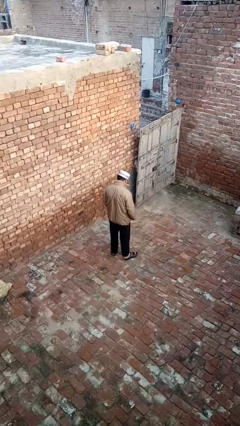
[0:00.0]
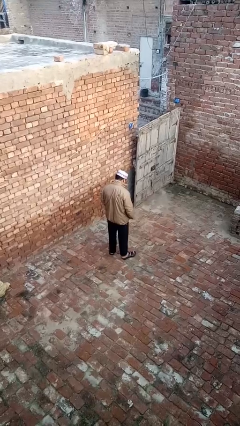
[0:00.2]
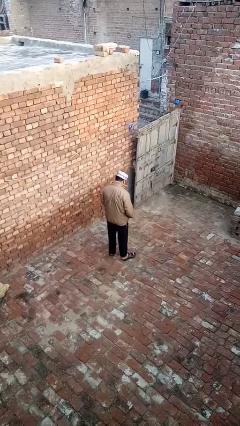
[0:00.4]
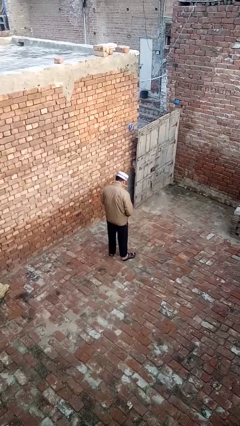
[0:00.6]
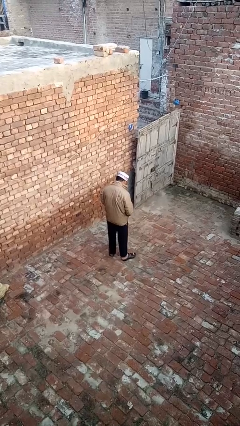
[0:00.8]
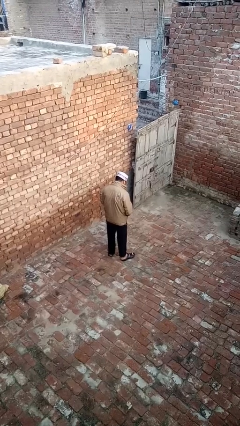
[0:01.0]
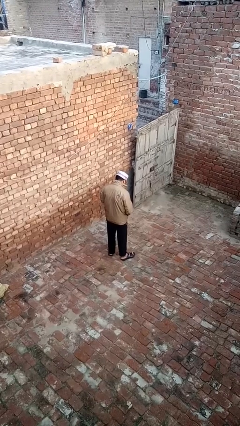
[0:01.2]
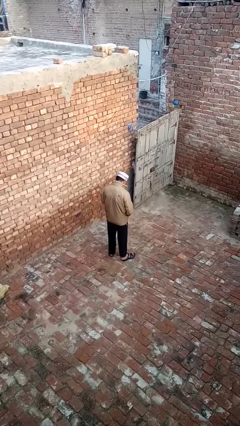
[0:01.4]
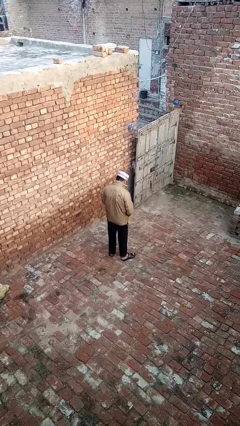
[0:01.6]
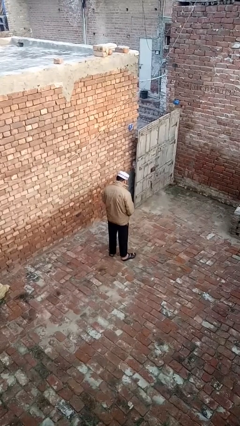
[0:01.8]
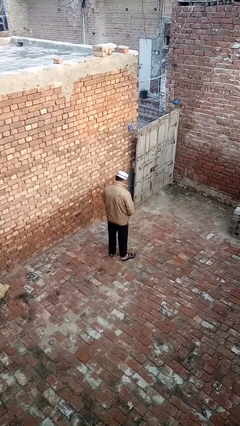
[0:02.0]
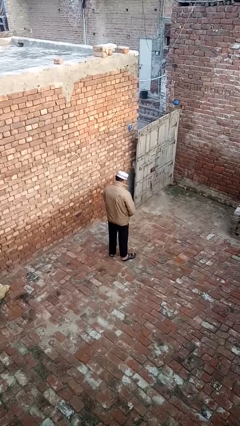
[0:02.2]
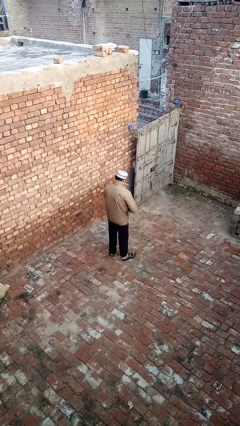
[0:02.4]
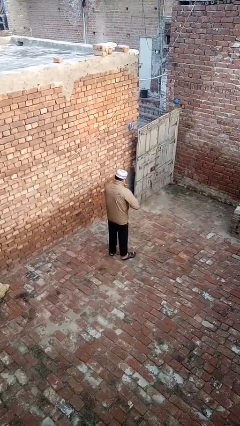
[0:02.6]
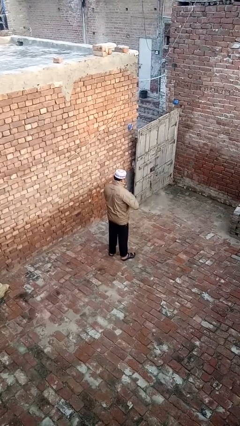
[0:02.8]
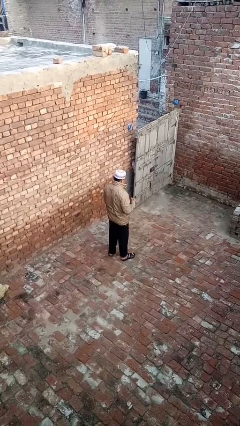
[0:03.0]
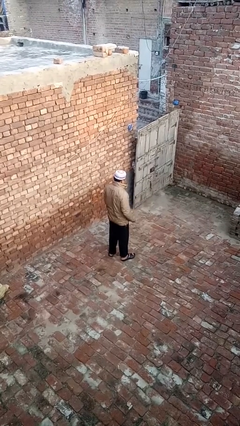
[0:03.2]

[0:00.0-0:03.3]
person zips up jacket

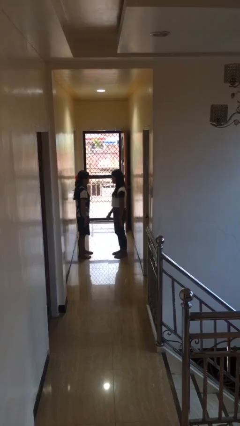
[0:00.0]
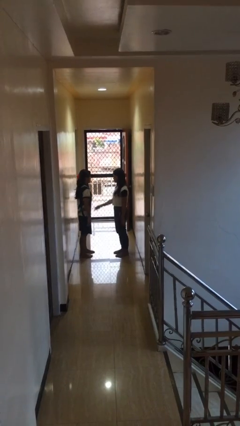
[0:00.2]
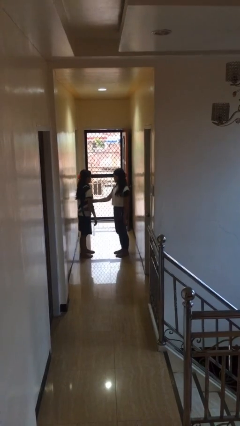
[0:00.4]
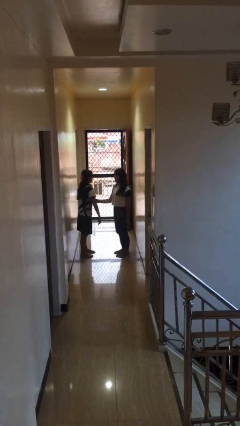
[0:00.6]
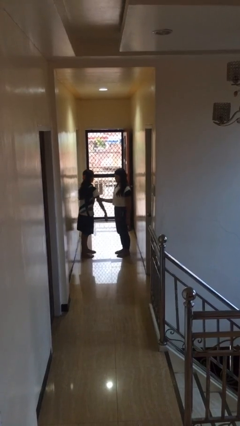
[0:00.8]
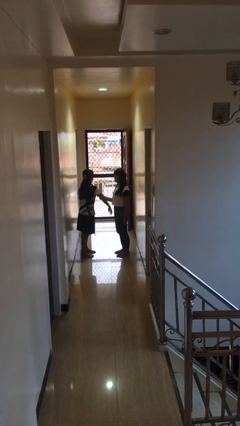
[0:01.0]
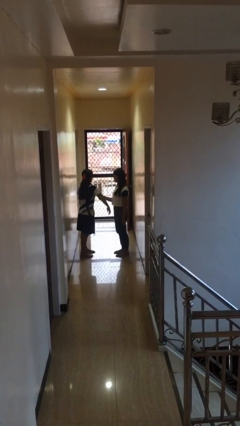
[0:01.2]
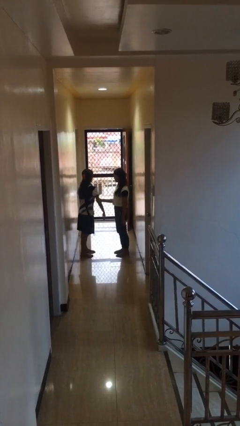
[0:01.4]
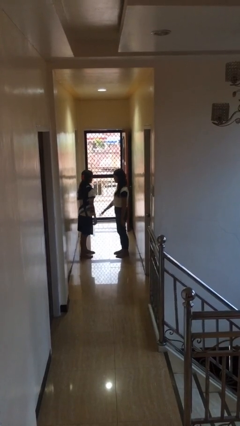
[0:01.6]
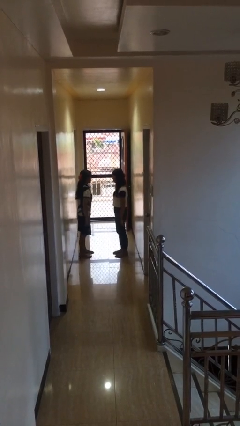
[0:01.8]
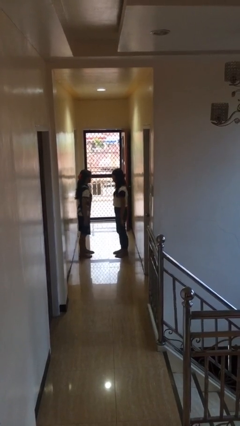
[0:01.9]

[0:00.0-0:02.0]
person grabs person by bicep

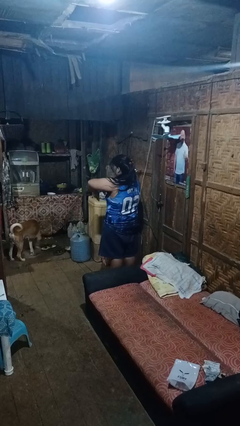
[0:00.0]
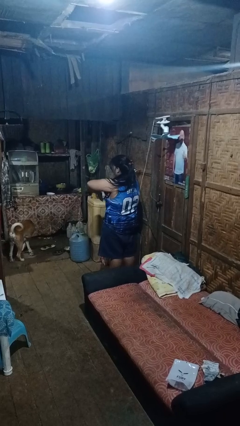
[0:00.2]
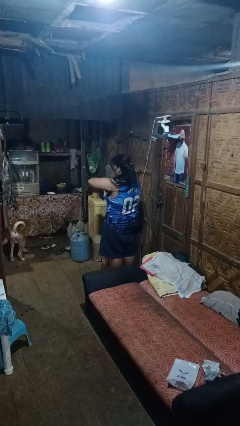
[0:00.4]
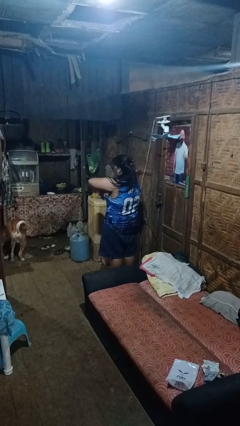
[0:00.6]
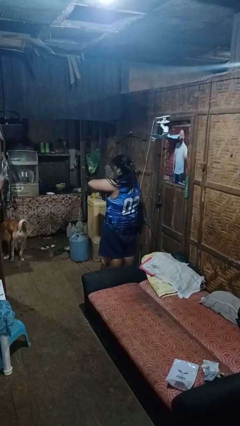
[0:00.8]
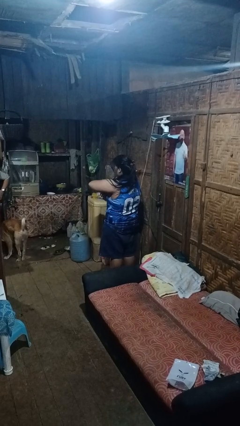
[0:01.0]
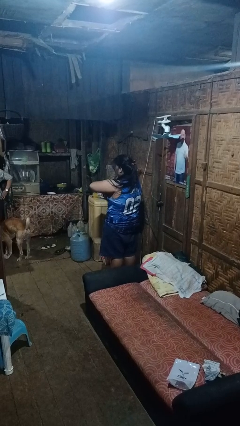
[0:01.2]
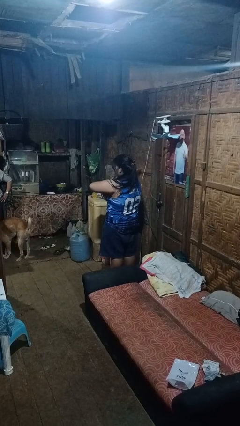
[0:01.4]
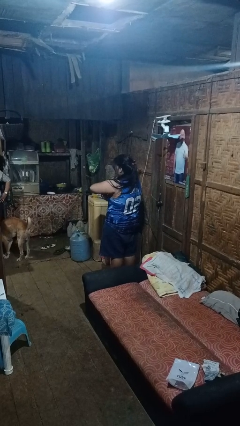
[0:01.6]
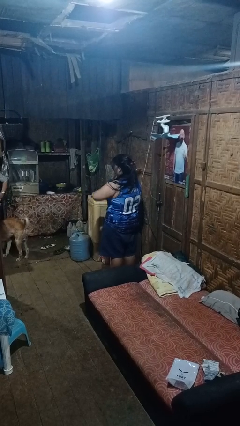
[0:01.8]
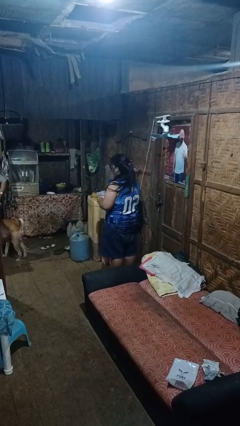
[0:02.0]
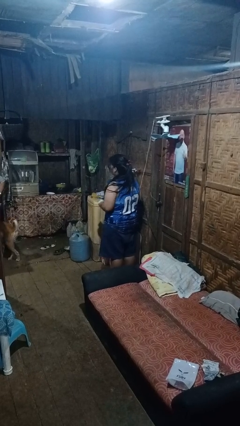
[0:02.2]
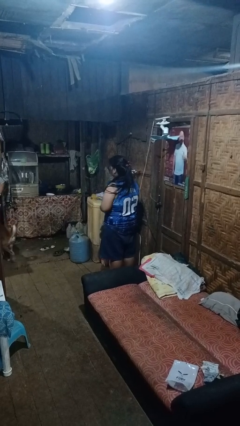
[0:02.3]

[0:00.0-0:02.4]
person applies deodorant

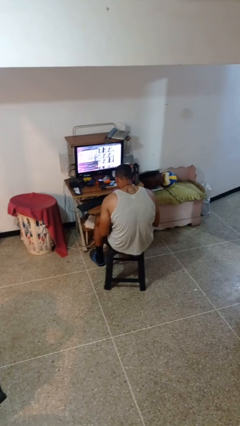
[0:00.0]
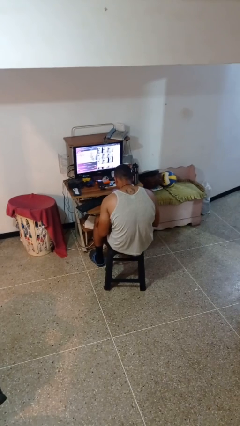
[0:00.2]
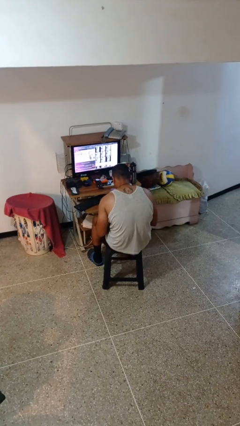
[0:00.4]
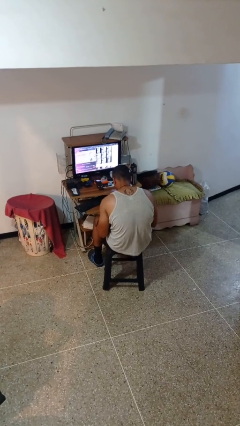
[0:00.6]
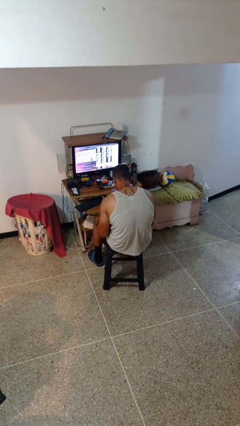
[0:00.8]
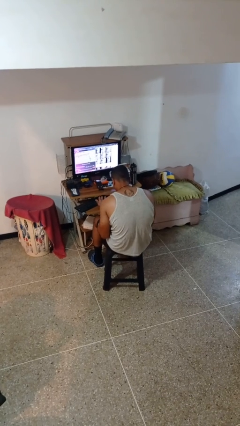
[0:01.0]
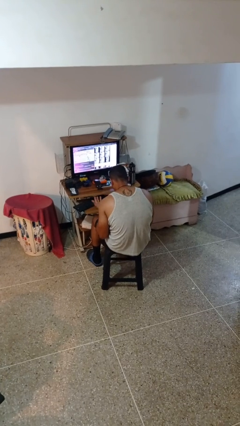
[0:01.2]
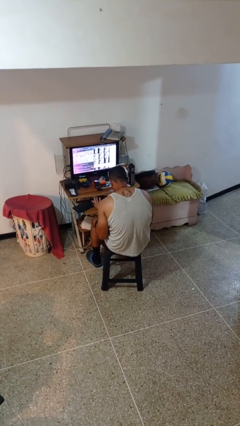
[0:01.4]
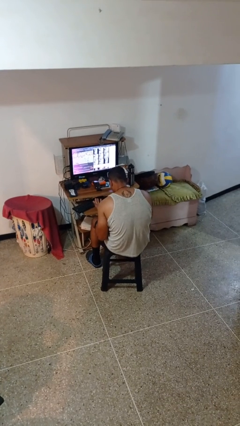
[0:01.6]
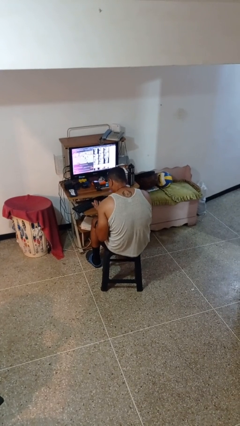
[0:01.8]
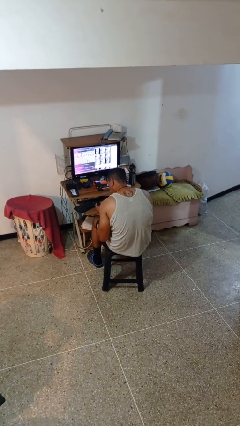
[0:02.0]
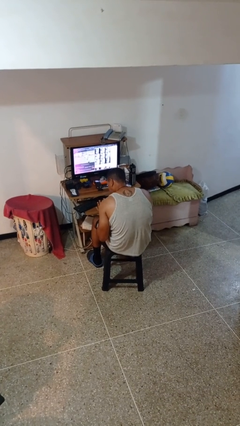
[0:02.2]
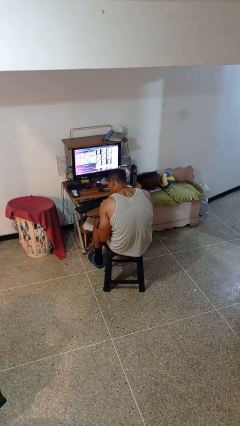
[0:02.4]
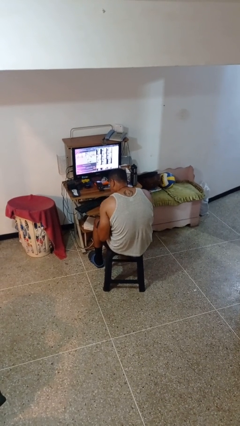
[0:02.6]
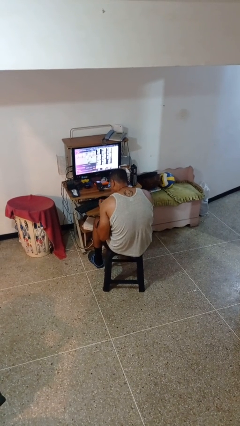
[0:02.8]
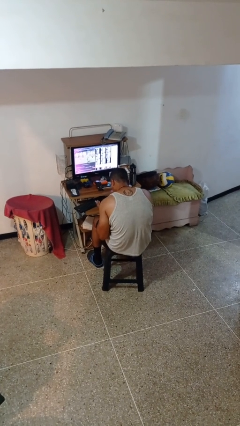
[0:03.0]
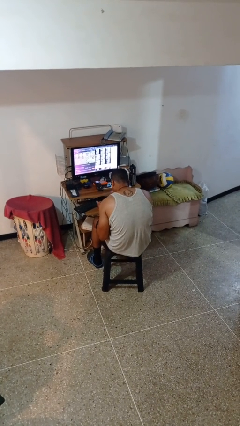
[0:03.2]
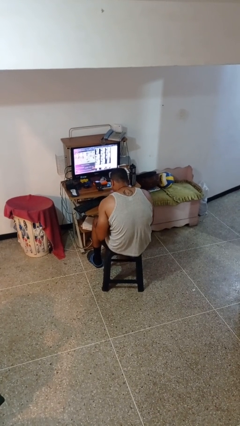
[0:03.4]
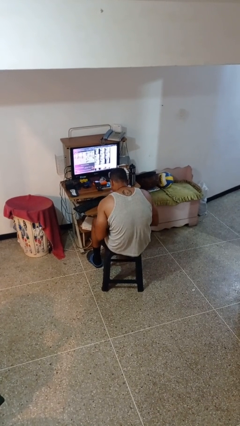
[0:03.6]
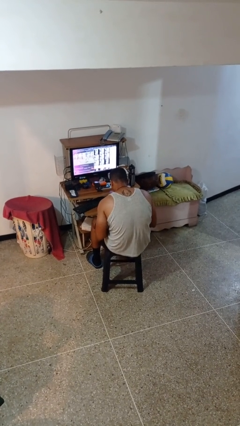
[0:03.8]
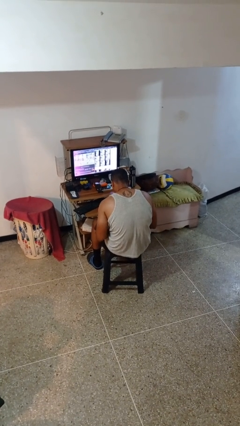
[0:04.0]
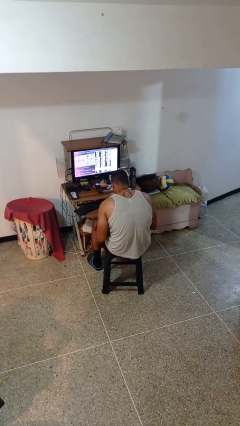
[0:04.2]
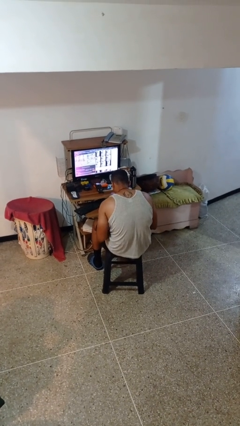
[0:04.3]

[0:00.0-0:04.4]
person looks at hands in lap

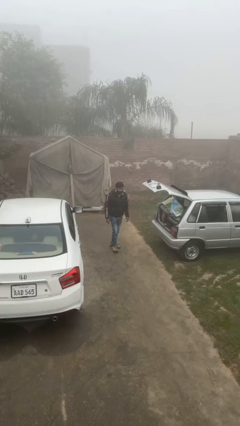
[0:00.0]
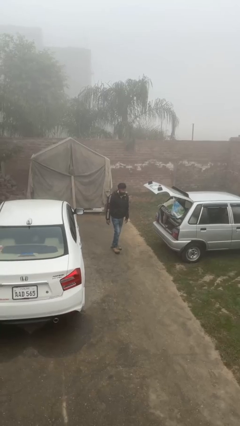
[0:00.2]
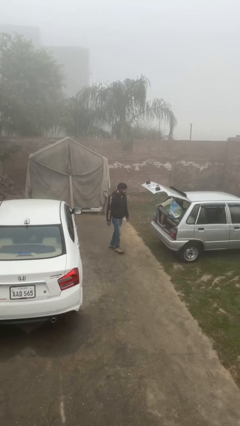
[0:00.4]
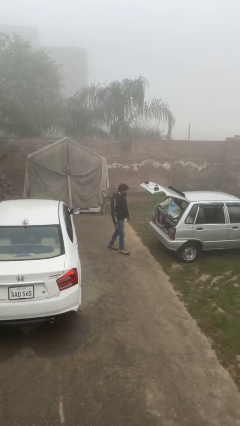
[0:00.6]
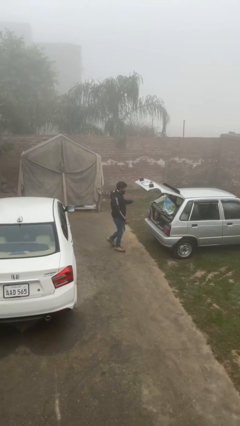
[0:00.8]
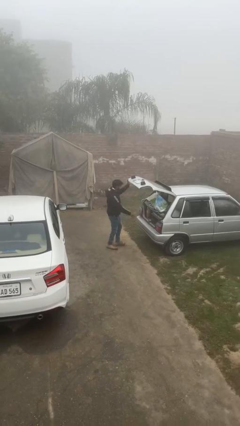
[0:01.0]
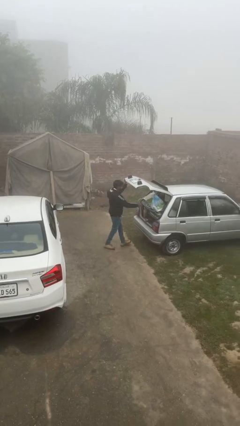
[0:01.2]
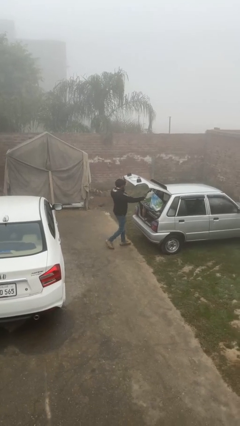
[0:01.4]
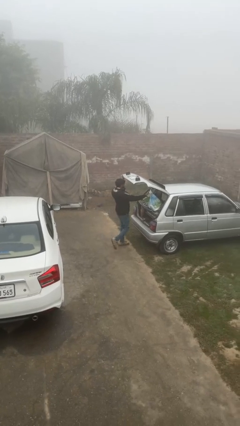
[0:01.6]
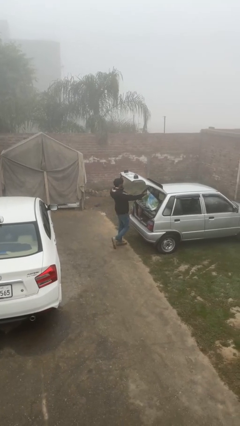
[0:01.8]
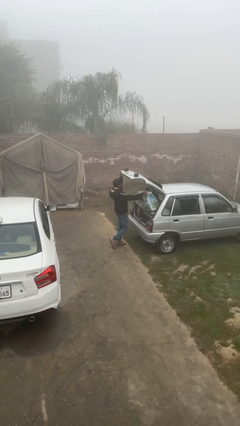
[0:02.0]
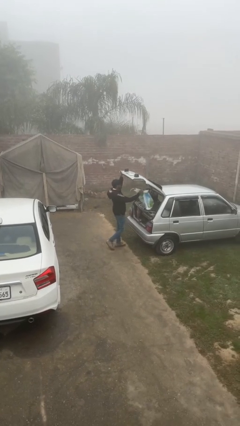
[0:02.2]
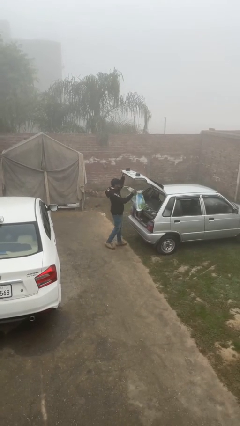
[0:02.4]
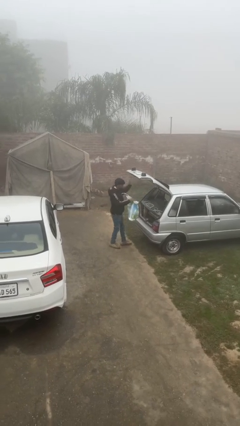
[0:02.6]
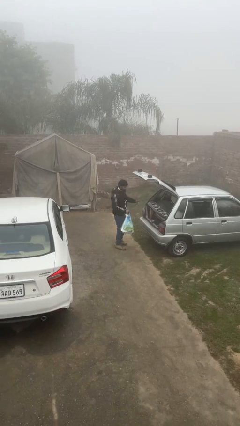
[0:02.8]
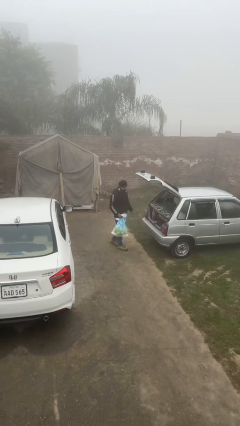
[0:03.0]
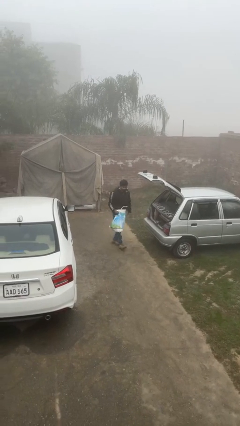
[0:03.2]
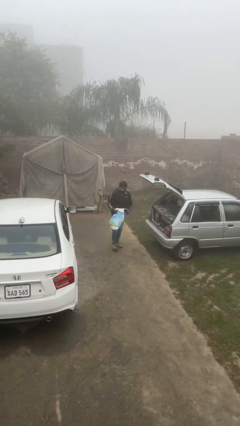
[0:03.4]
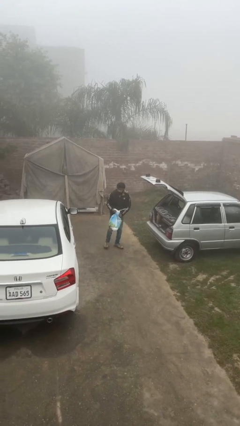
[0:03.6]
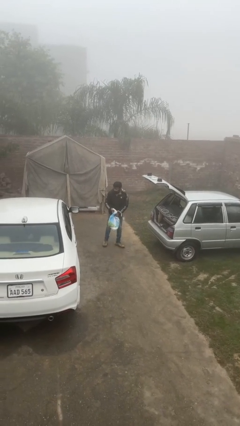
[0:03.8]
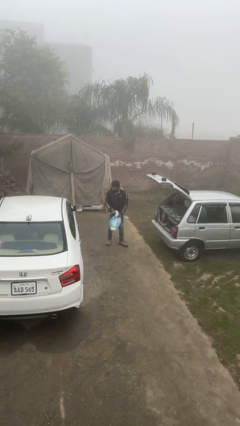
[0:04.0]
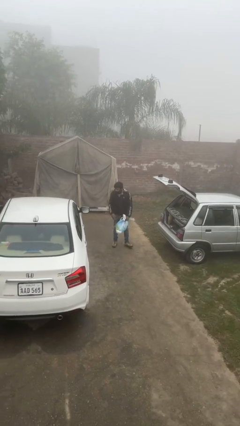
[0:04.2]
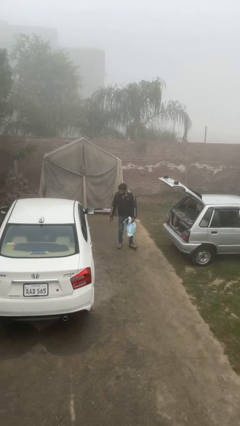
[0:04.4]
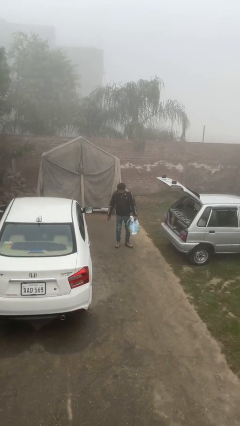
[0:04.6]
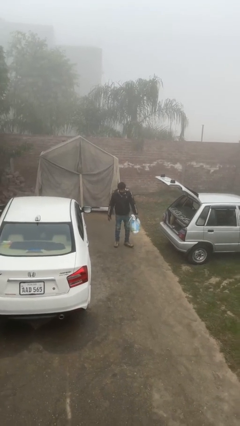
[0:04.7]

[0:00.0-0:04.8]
person unloads car

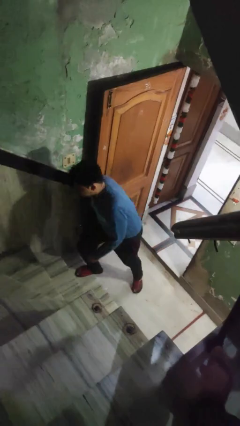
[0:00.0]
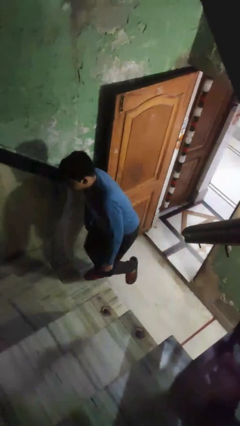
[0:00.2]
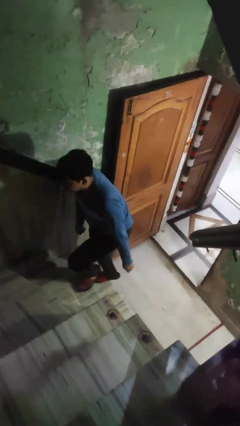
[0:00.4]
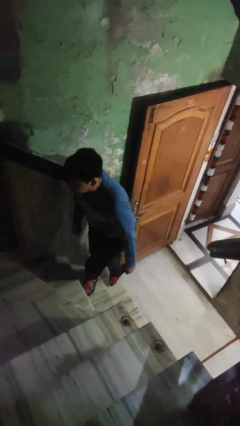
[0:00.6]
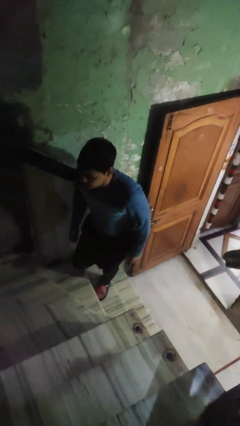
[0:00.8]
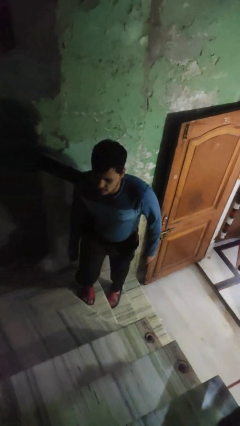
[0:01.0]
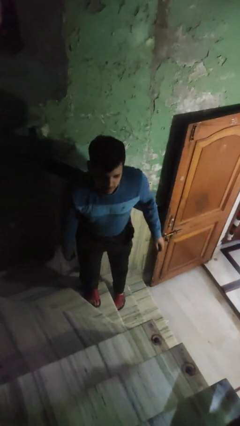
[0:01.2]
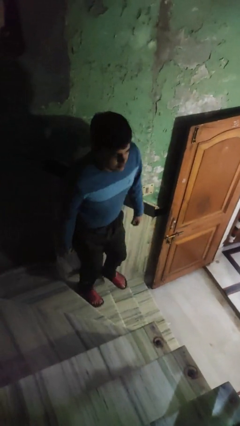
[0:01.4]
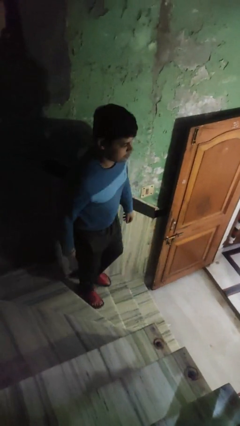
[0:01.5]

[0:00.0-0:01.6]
person climbs up stairs
